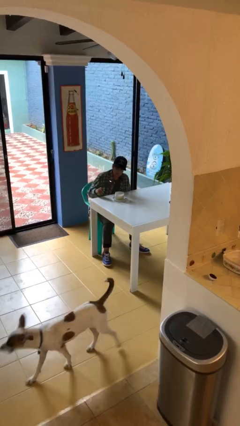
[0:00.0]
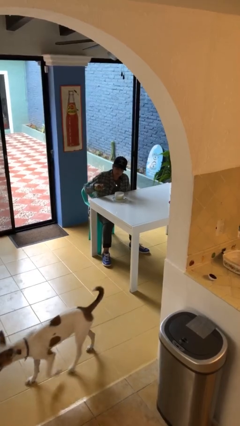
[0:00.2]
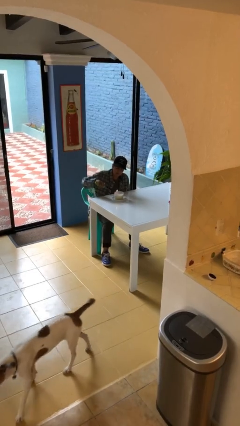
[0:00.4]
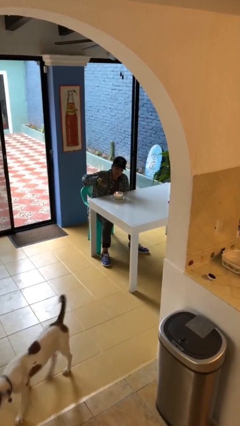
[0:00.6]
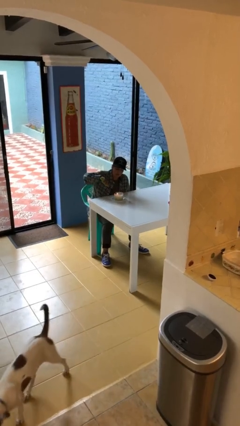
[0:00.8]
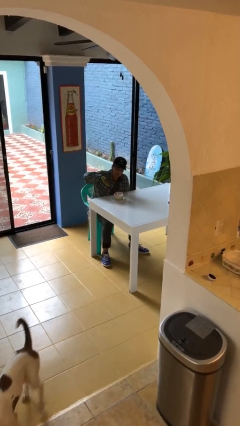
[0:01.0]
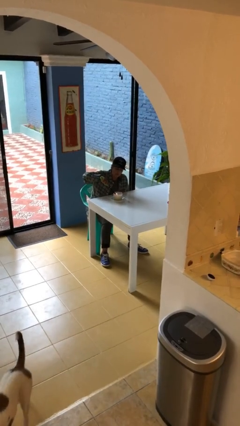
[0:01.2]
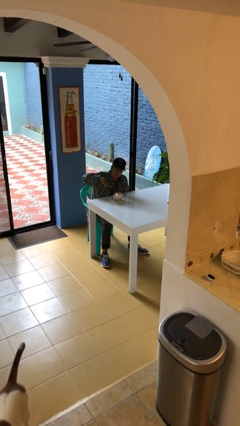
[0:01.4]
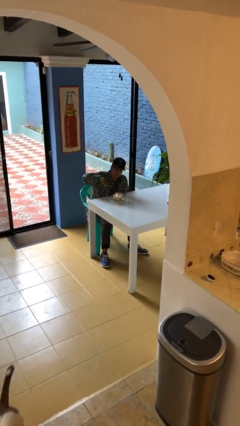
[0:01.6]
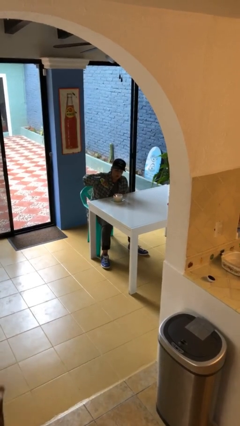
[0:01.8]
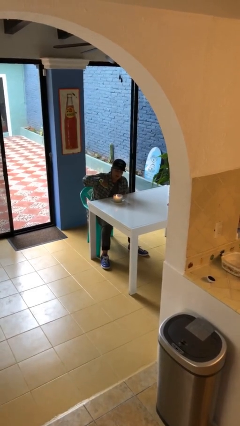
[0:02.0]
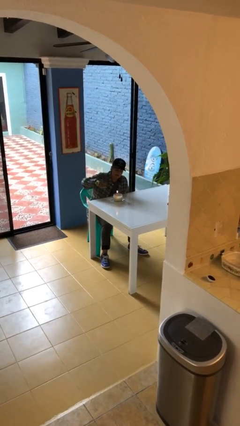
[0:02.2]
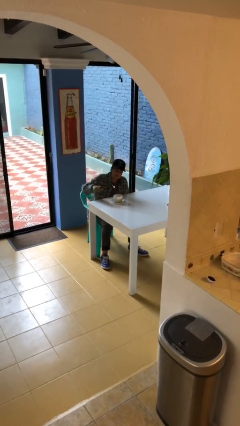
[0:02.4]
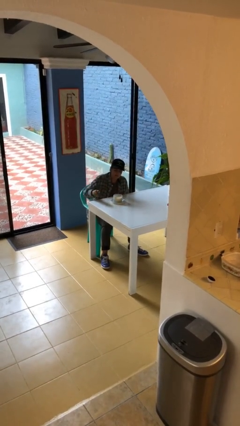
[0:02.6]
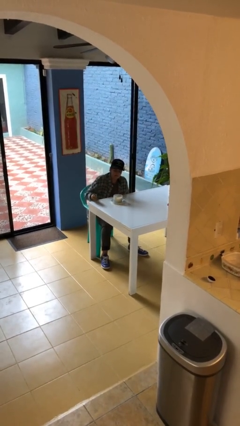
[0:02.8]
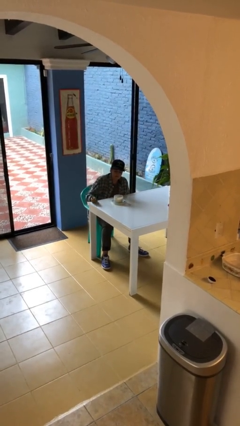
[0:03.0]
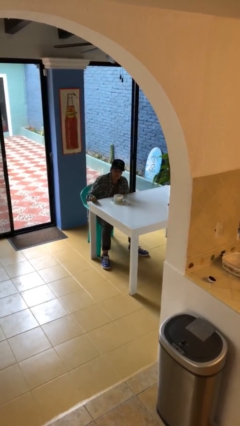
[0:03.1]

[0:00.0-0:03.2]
person lights candle

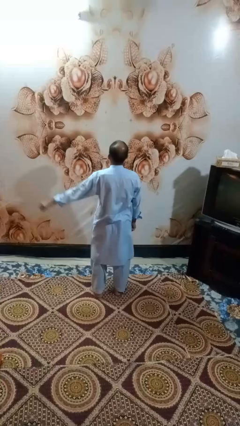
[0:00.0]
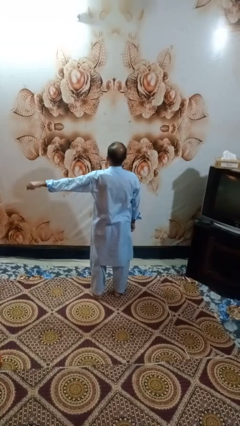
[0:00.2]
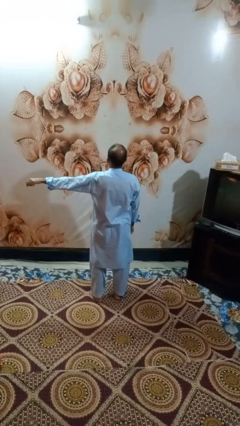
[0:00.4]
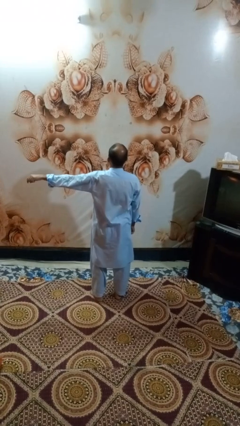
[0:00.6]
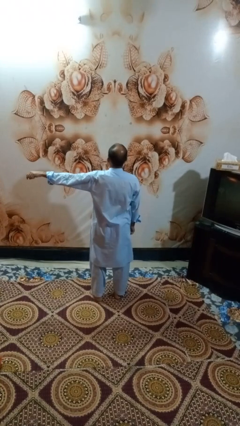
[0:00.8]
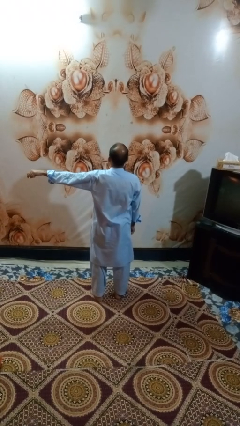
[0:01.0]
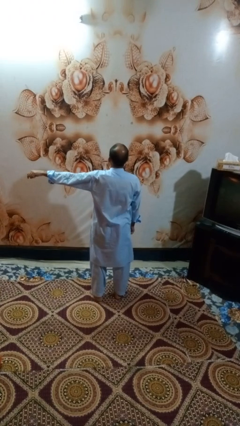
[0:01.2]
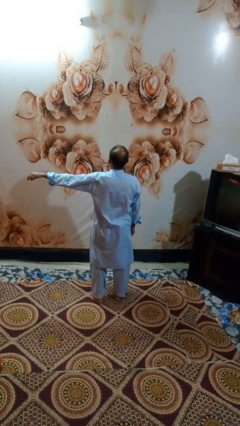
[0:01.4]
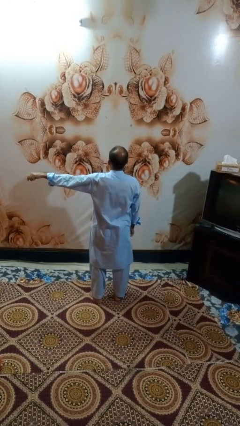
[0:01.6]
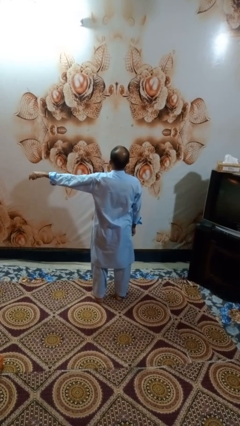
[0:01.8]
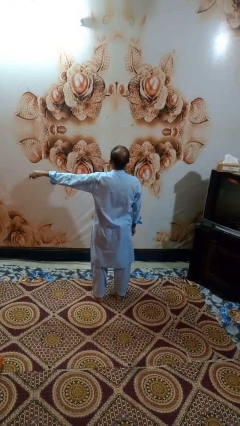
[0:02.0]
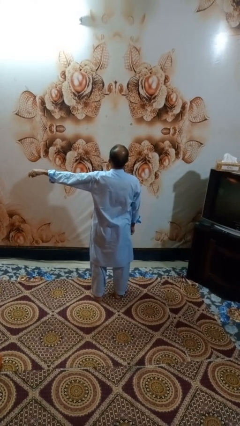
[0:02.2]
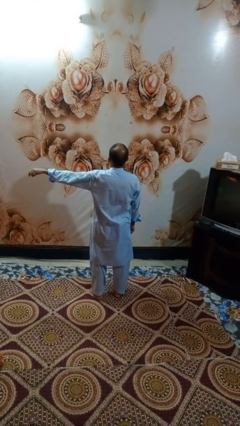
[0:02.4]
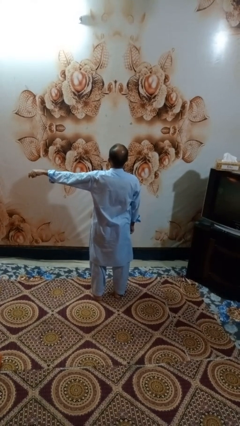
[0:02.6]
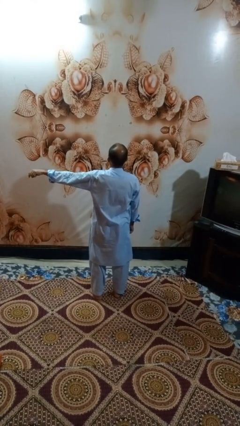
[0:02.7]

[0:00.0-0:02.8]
person gestures swipe left

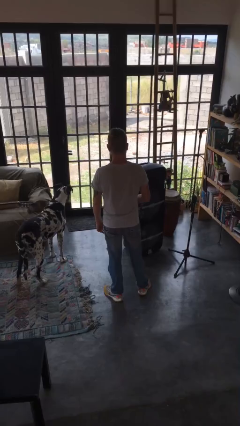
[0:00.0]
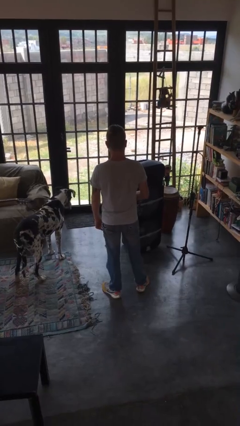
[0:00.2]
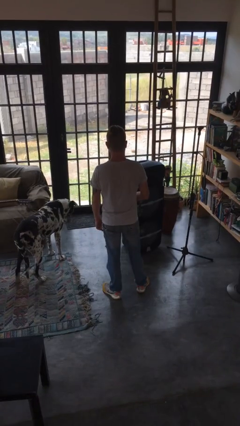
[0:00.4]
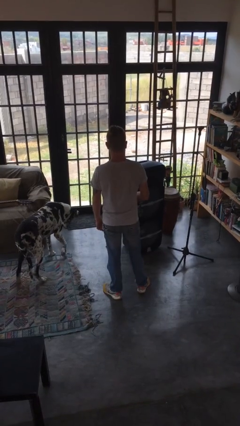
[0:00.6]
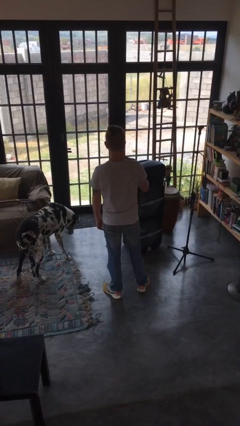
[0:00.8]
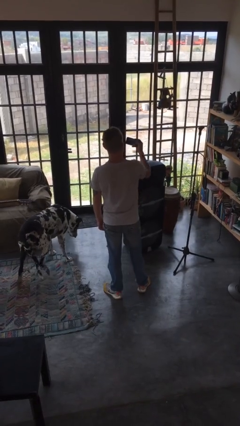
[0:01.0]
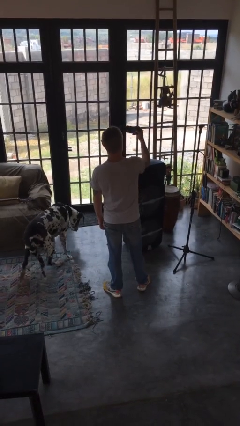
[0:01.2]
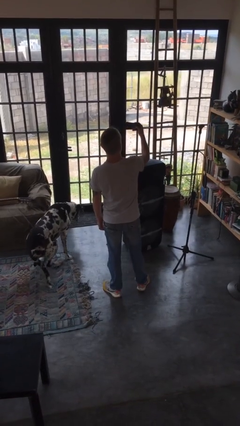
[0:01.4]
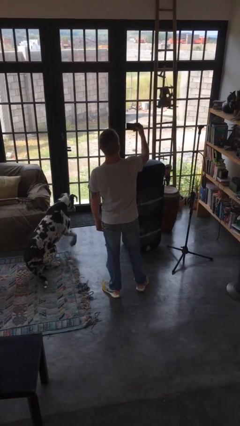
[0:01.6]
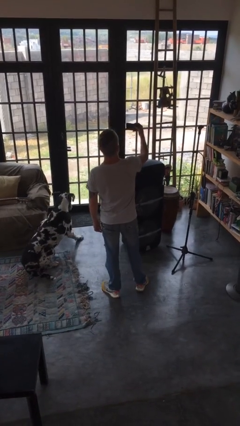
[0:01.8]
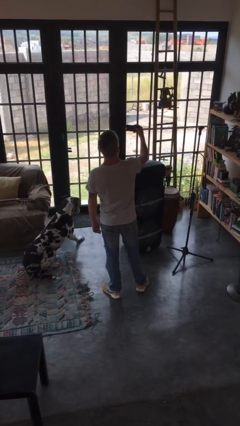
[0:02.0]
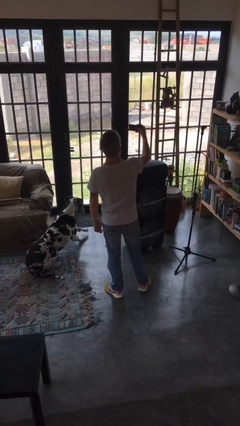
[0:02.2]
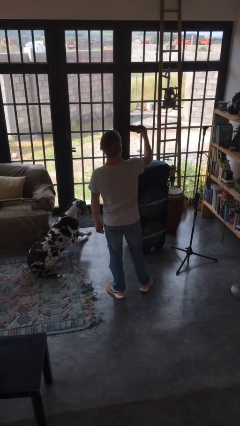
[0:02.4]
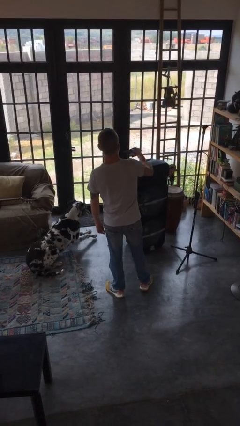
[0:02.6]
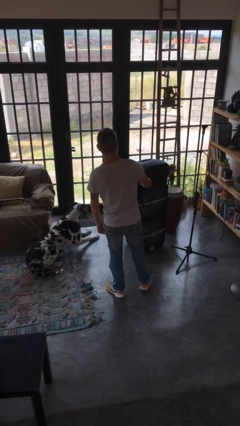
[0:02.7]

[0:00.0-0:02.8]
person takes selfie

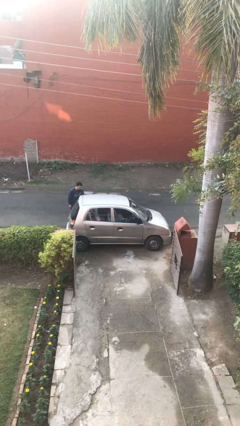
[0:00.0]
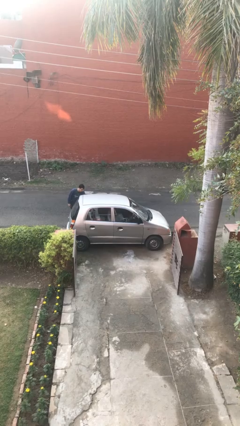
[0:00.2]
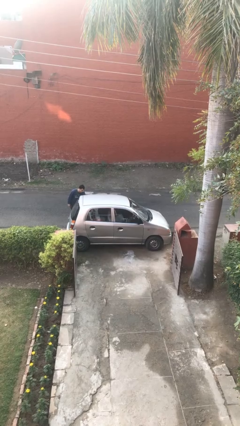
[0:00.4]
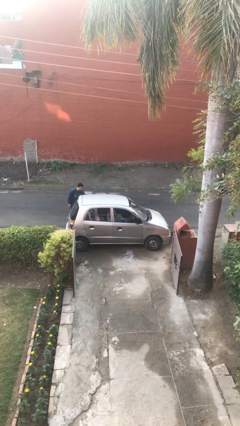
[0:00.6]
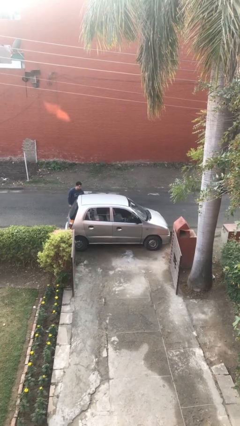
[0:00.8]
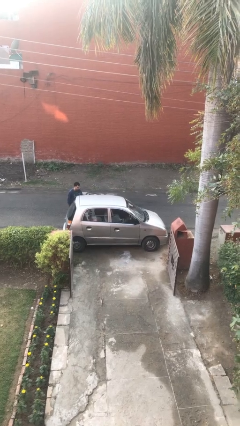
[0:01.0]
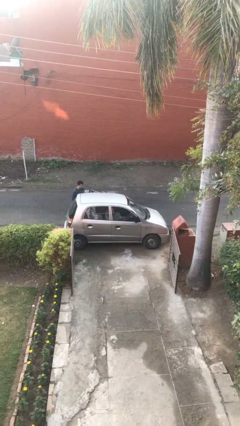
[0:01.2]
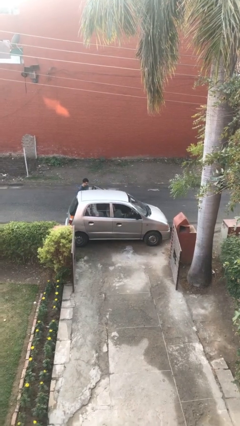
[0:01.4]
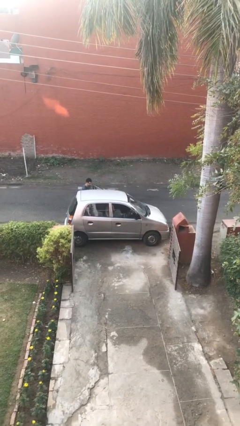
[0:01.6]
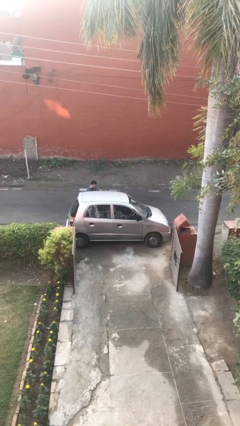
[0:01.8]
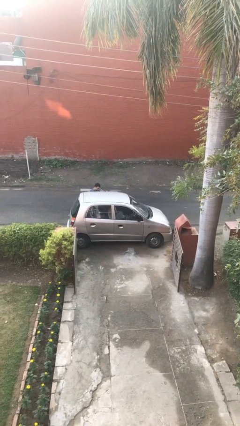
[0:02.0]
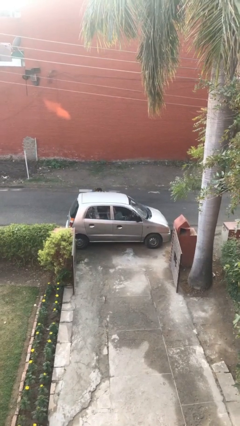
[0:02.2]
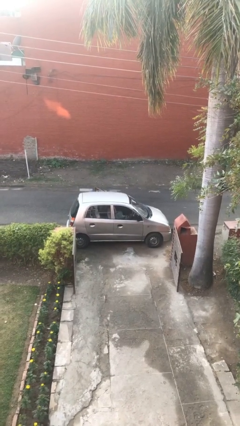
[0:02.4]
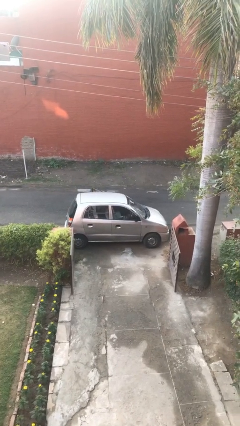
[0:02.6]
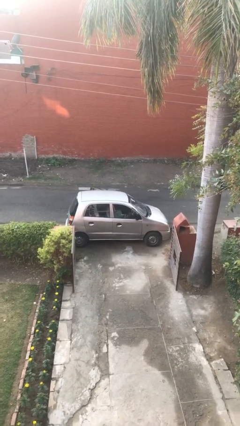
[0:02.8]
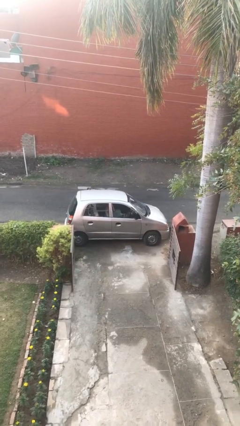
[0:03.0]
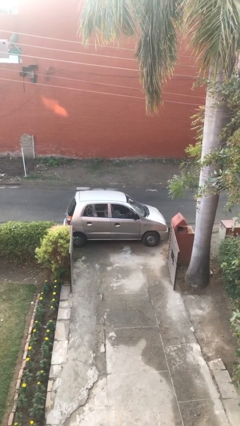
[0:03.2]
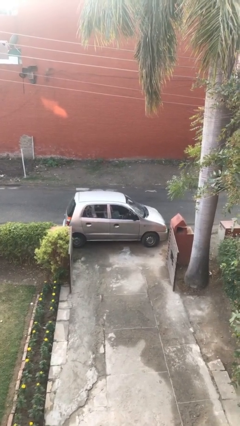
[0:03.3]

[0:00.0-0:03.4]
car picks up person

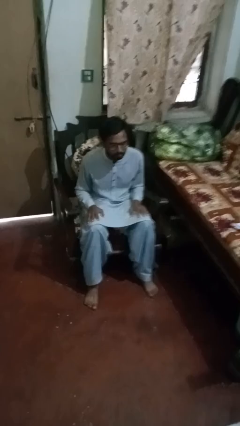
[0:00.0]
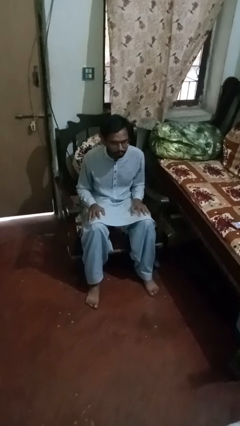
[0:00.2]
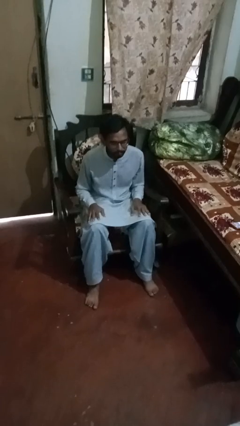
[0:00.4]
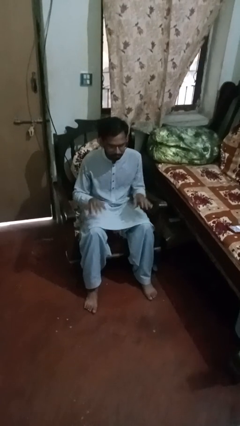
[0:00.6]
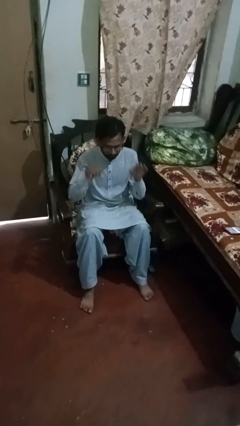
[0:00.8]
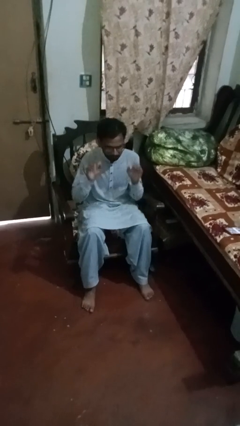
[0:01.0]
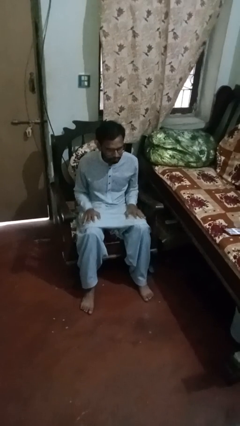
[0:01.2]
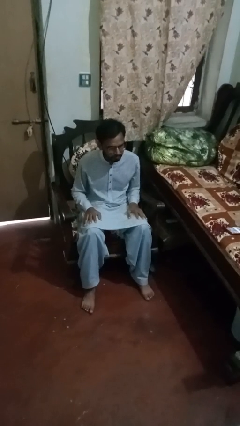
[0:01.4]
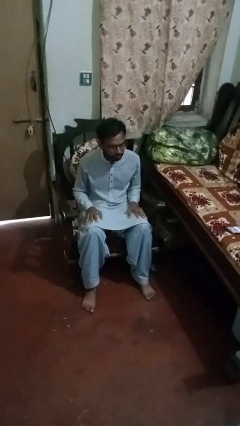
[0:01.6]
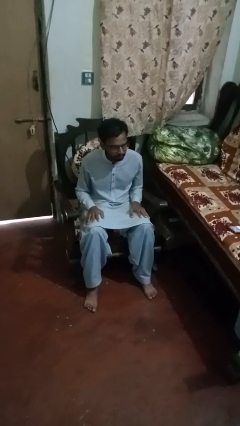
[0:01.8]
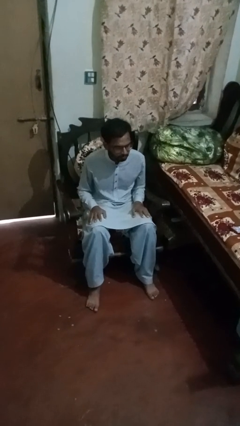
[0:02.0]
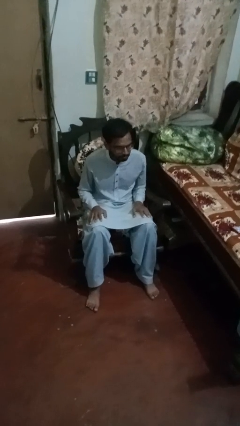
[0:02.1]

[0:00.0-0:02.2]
person slaps hands on thighs

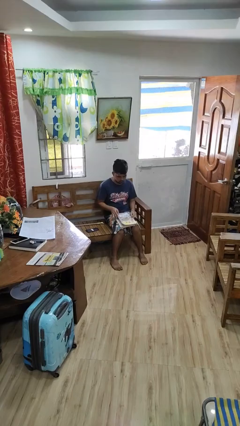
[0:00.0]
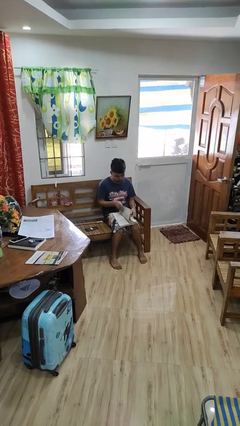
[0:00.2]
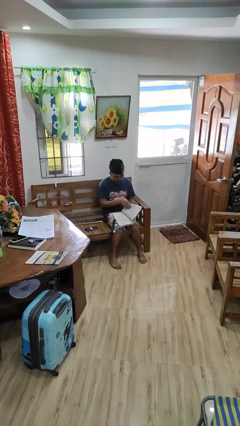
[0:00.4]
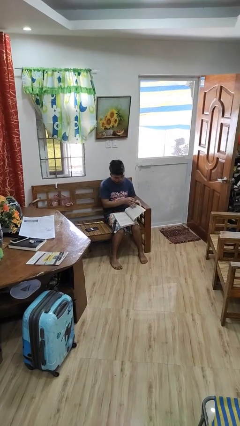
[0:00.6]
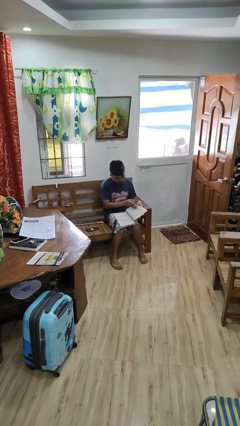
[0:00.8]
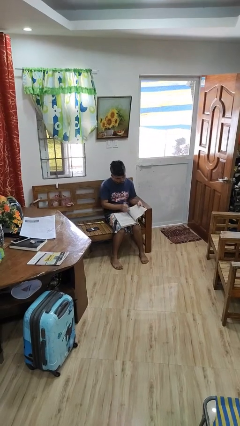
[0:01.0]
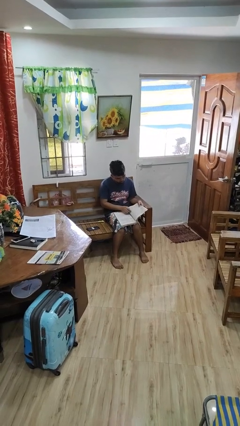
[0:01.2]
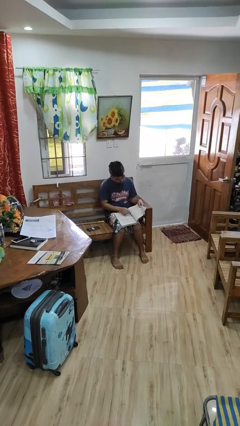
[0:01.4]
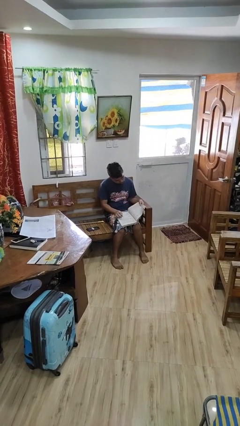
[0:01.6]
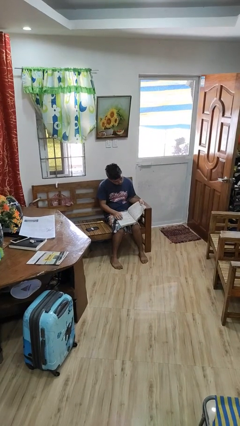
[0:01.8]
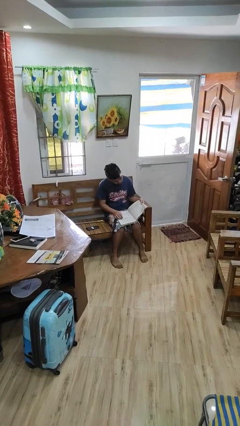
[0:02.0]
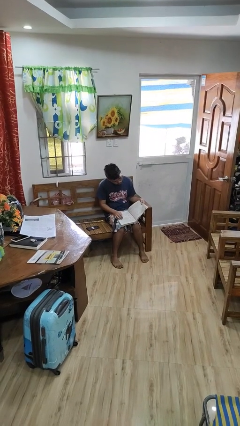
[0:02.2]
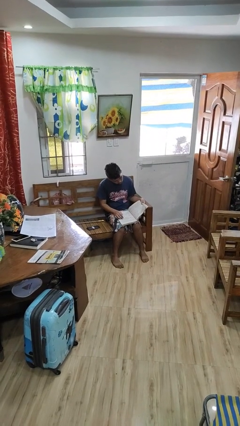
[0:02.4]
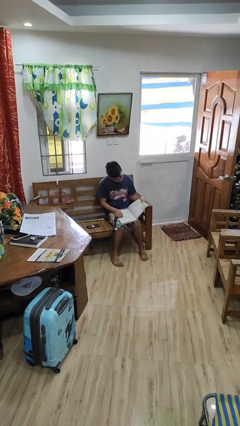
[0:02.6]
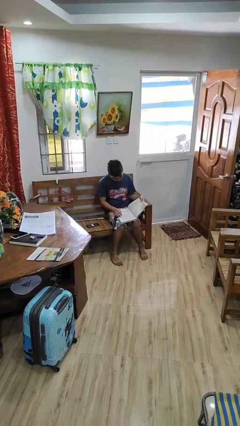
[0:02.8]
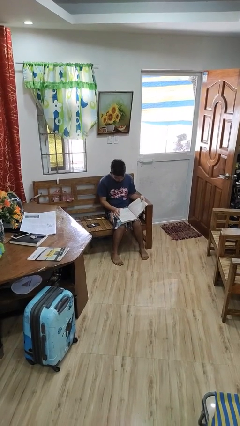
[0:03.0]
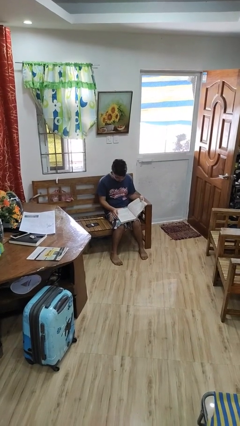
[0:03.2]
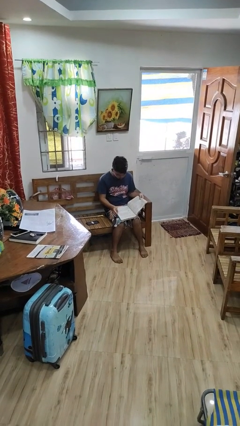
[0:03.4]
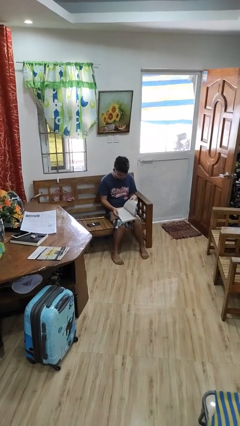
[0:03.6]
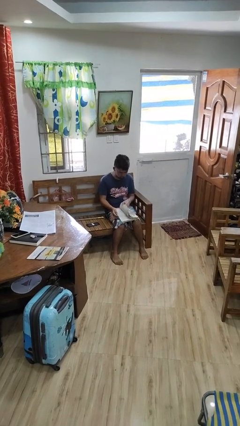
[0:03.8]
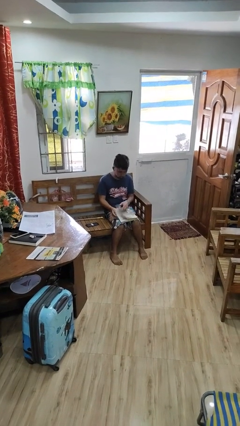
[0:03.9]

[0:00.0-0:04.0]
person reads book
